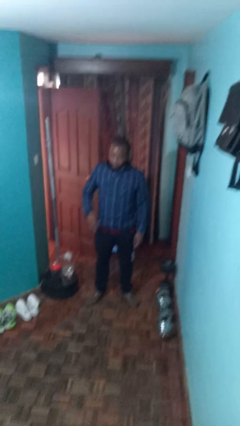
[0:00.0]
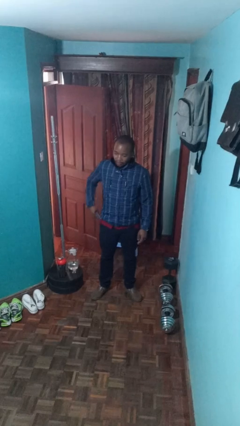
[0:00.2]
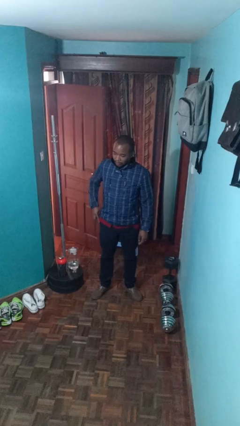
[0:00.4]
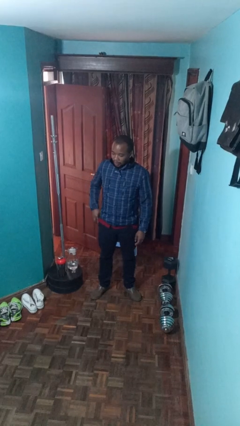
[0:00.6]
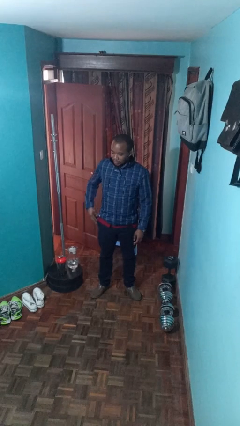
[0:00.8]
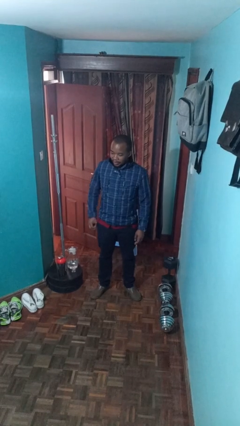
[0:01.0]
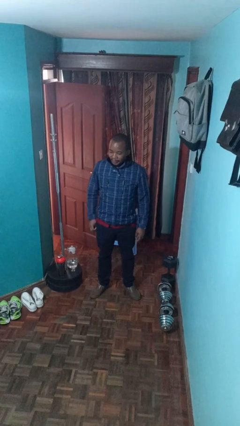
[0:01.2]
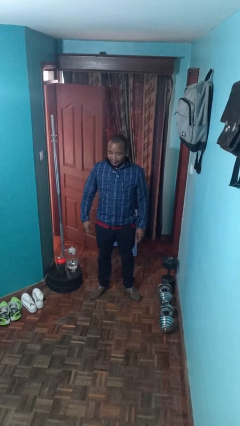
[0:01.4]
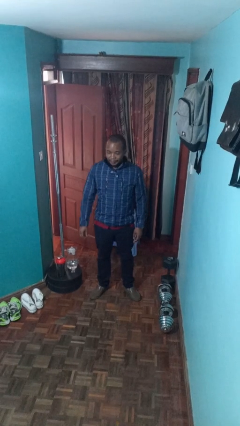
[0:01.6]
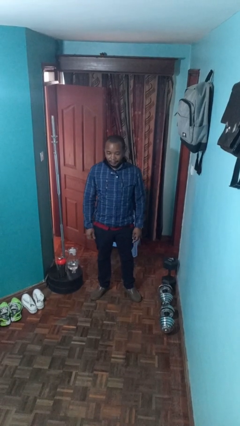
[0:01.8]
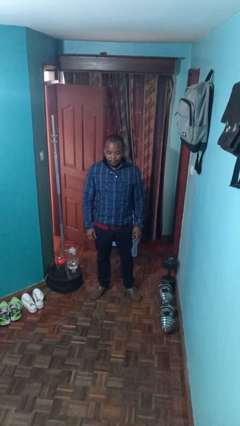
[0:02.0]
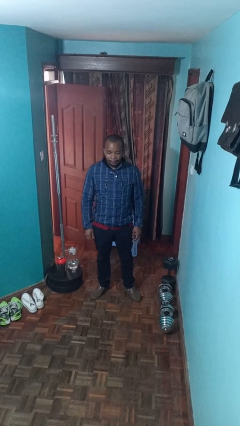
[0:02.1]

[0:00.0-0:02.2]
person puts phone into pocket

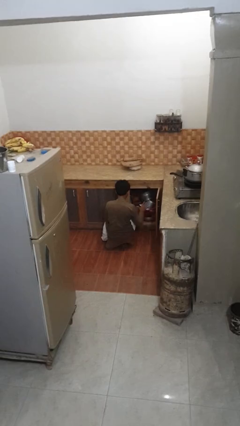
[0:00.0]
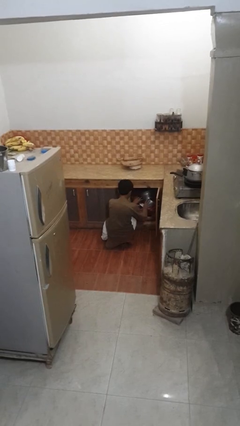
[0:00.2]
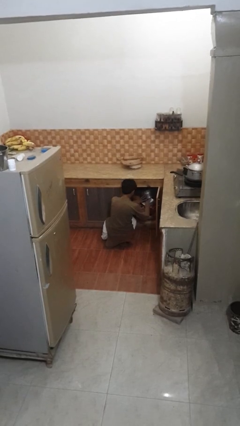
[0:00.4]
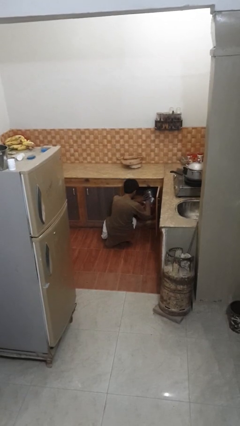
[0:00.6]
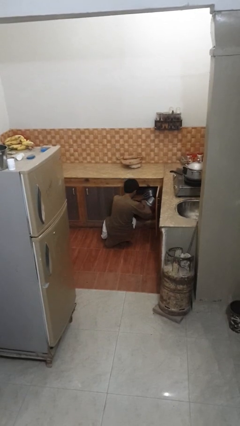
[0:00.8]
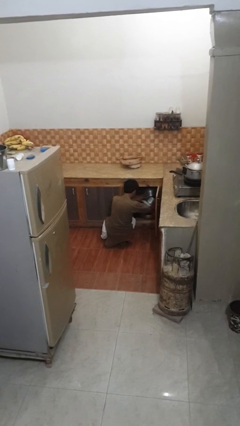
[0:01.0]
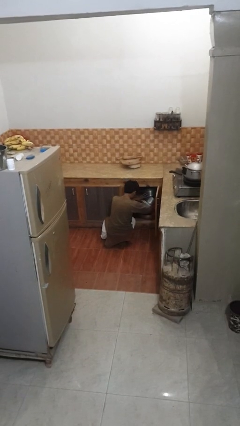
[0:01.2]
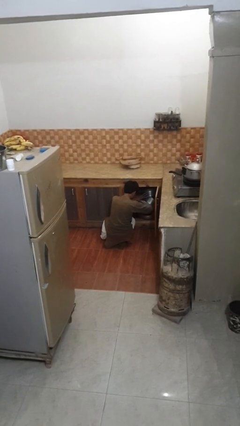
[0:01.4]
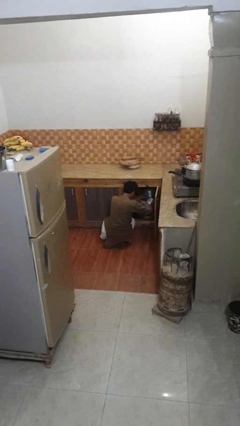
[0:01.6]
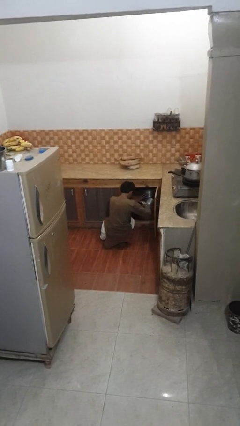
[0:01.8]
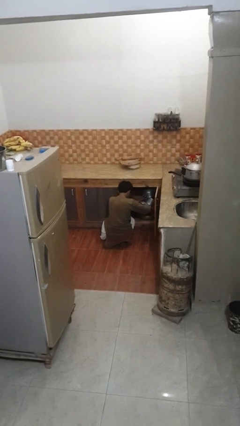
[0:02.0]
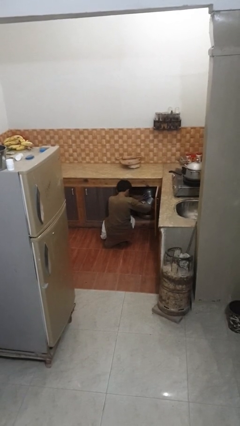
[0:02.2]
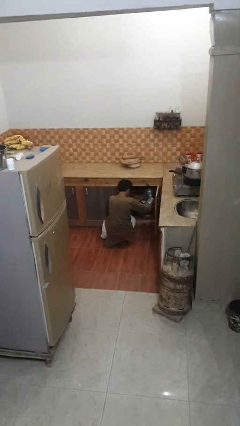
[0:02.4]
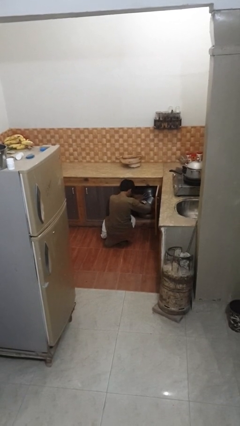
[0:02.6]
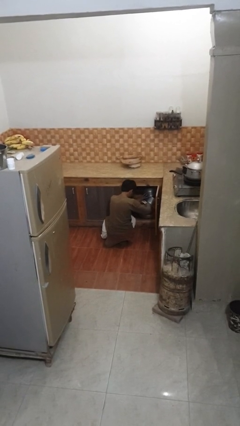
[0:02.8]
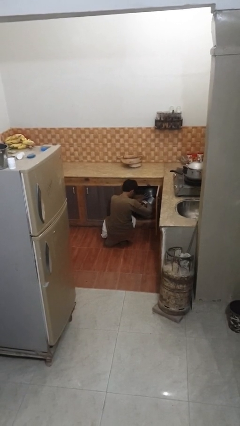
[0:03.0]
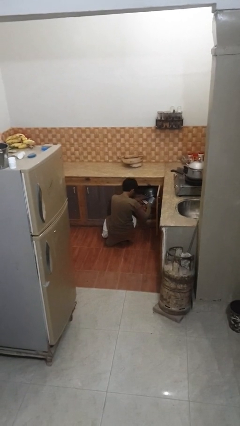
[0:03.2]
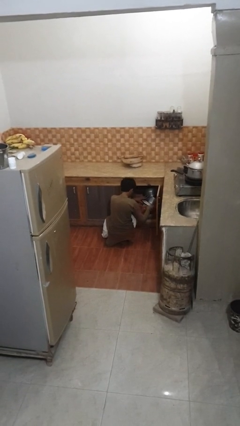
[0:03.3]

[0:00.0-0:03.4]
person searches in kitchen drawer

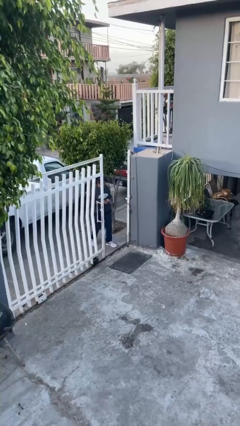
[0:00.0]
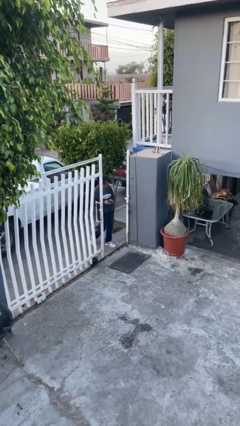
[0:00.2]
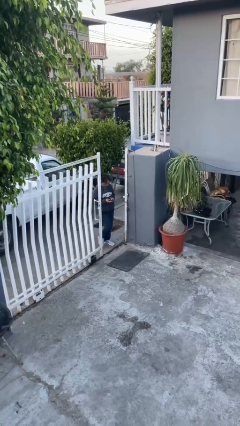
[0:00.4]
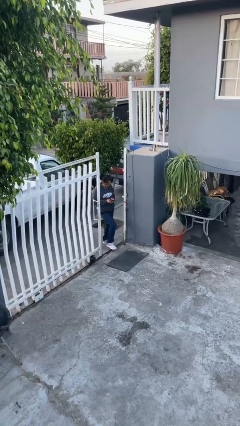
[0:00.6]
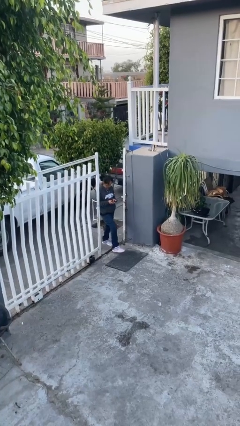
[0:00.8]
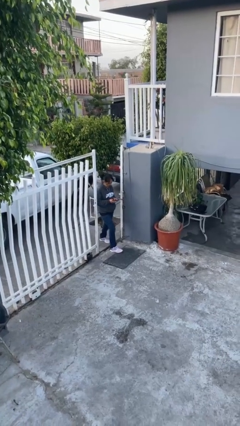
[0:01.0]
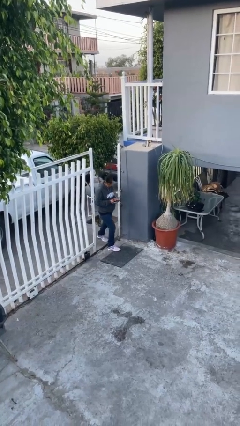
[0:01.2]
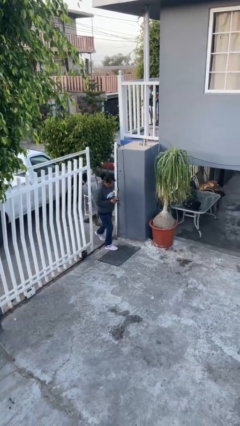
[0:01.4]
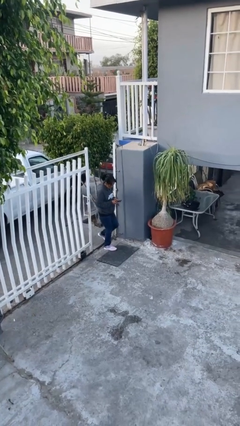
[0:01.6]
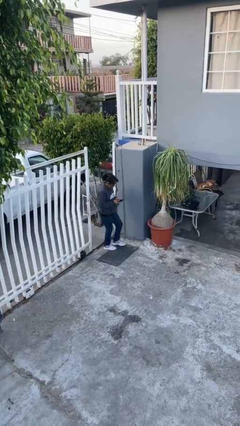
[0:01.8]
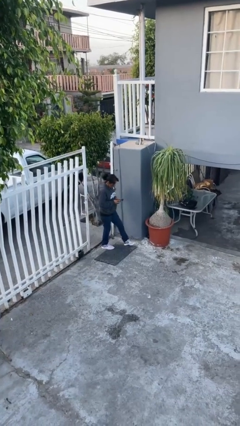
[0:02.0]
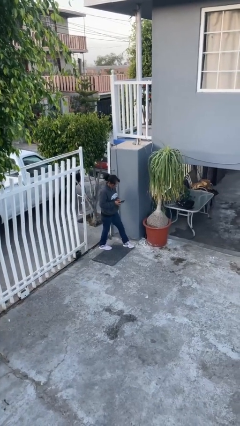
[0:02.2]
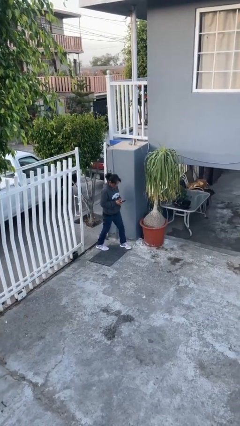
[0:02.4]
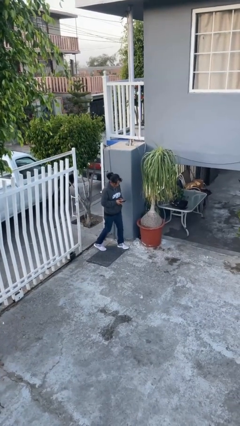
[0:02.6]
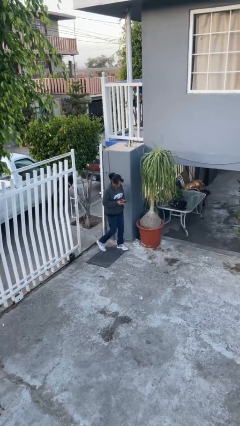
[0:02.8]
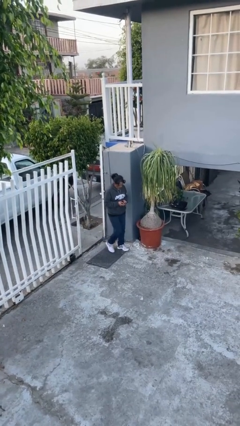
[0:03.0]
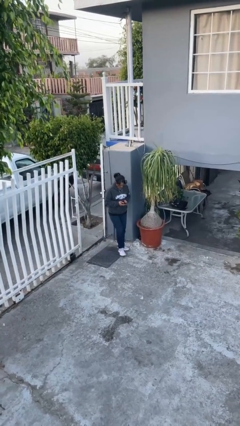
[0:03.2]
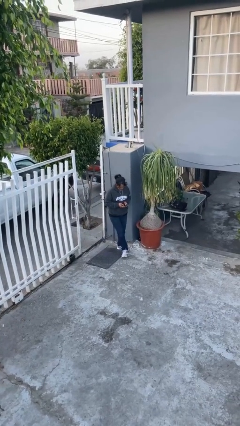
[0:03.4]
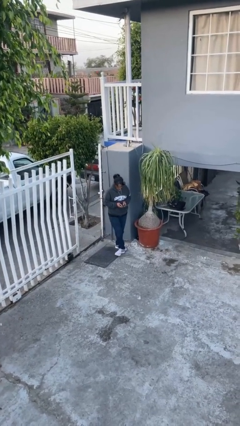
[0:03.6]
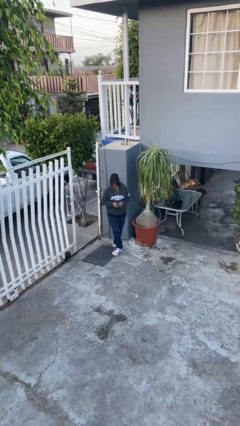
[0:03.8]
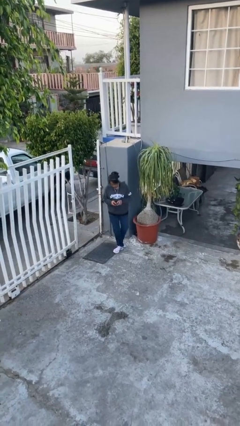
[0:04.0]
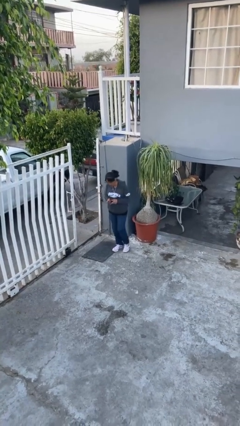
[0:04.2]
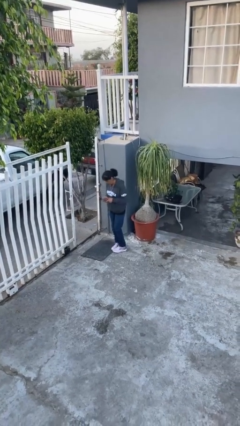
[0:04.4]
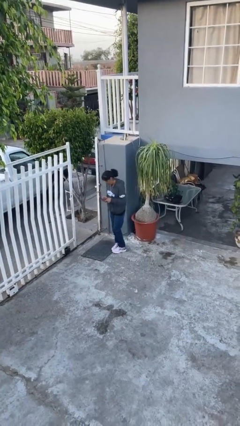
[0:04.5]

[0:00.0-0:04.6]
person enters scene through structure

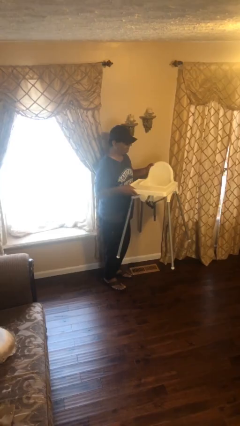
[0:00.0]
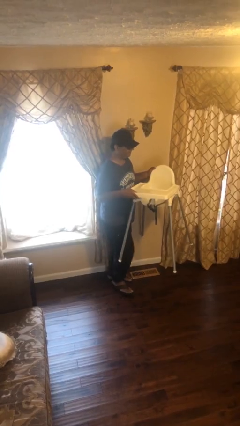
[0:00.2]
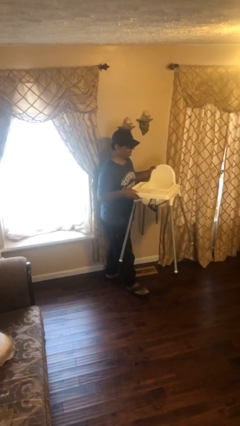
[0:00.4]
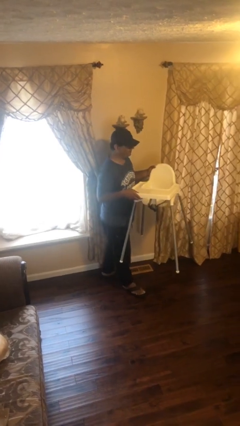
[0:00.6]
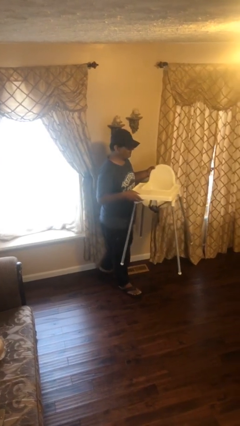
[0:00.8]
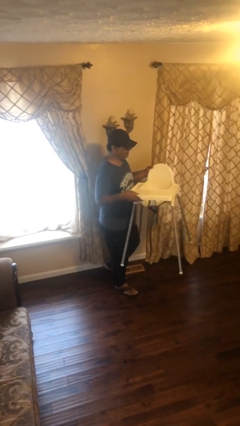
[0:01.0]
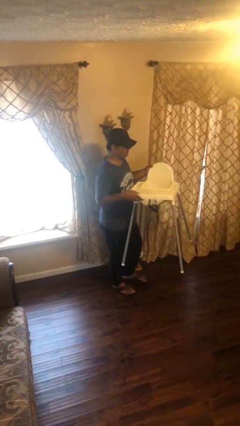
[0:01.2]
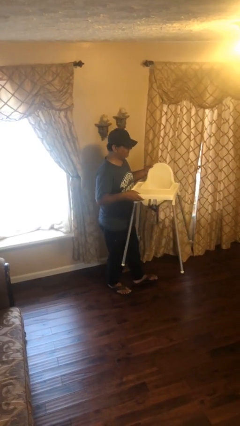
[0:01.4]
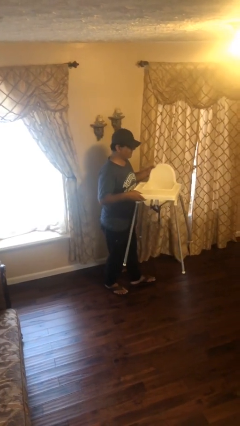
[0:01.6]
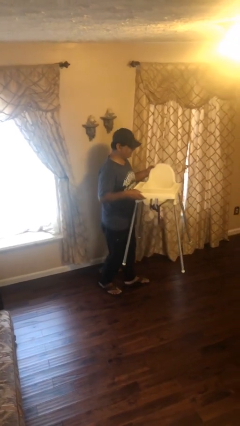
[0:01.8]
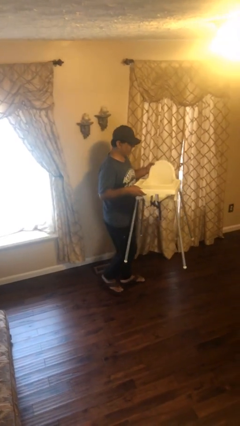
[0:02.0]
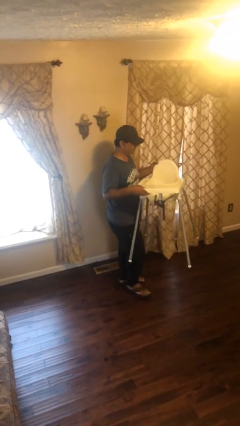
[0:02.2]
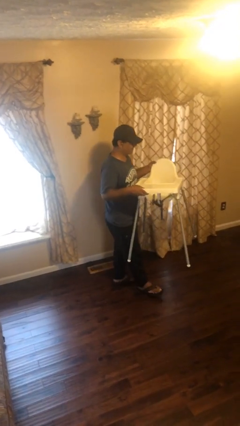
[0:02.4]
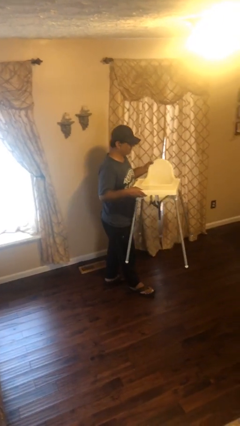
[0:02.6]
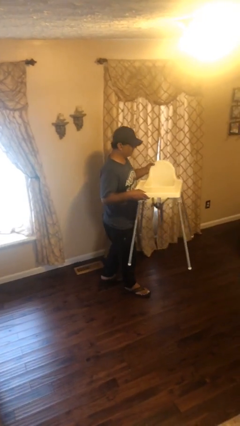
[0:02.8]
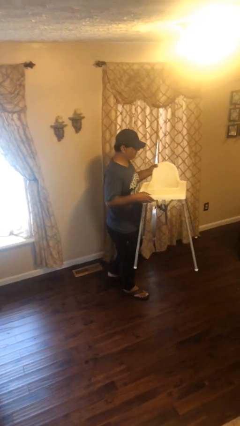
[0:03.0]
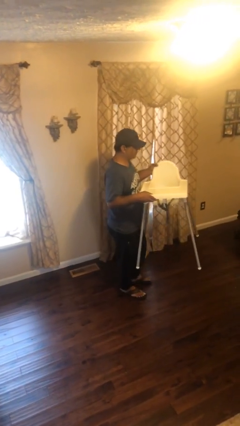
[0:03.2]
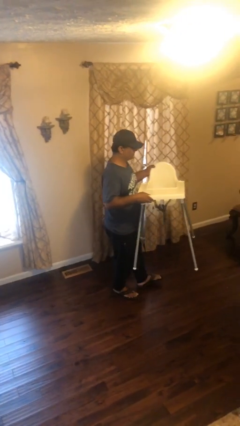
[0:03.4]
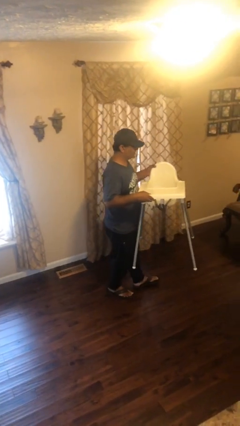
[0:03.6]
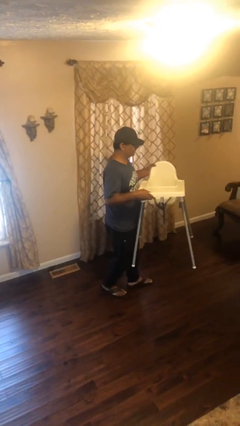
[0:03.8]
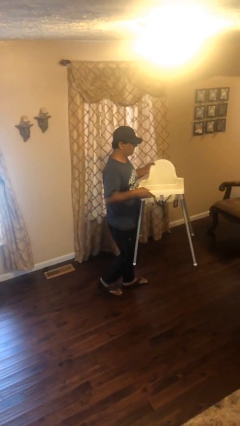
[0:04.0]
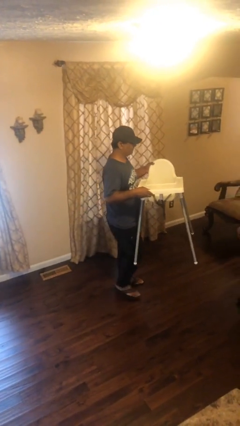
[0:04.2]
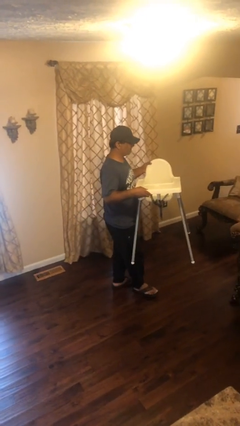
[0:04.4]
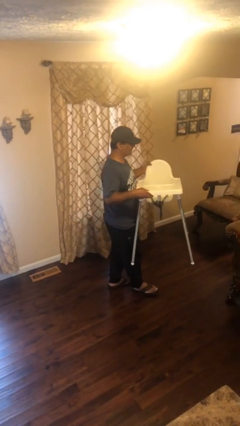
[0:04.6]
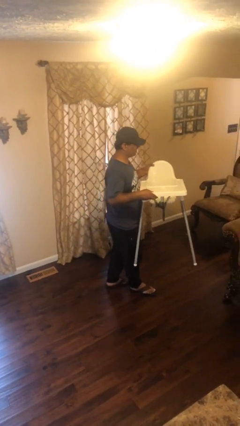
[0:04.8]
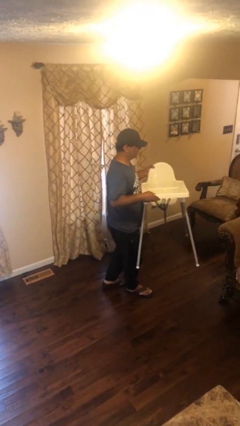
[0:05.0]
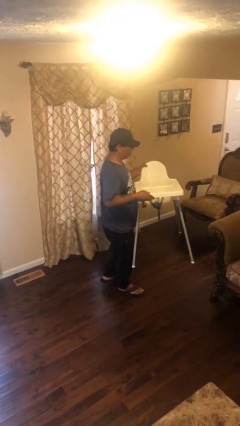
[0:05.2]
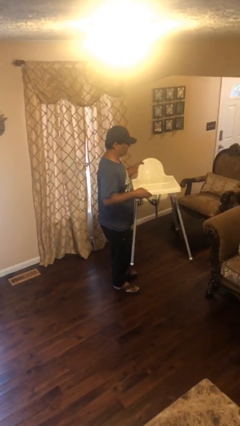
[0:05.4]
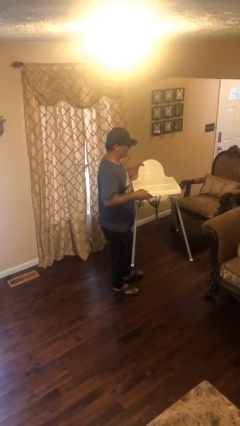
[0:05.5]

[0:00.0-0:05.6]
person carries heavy object

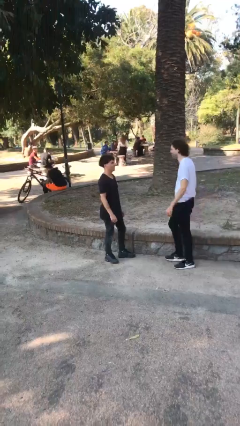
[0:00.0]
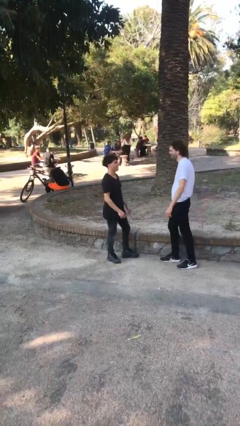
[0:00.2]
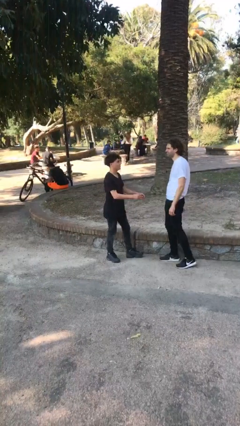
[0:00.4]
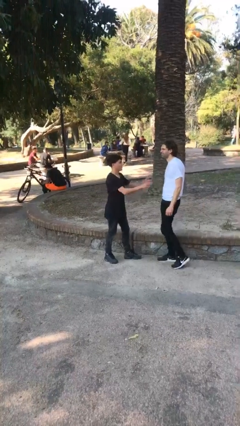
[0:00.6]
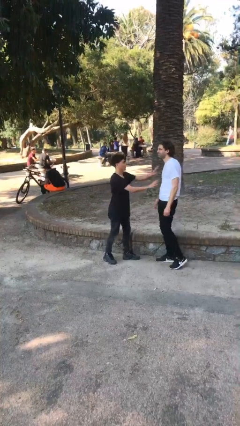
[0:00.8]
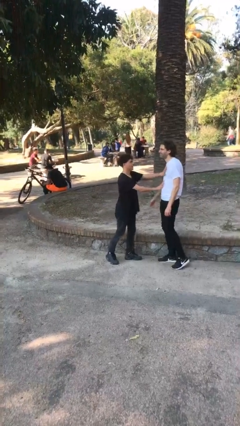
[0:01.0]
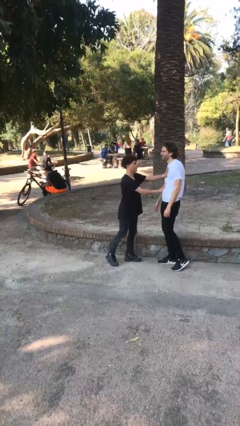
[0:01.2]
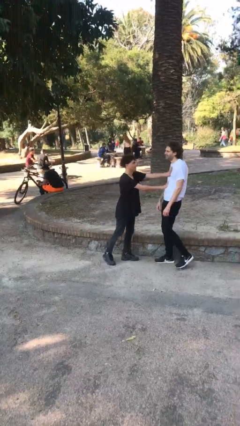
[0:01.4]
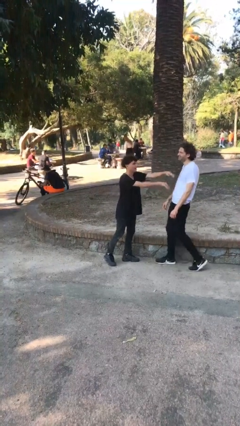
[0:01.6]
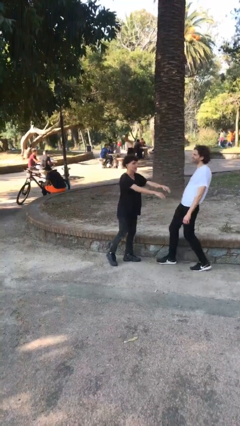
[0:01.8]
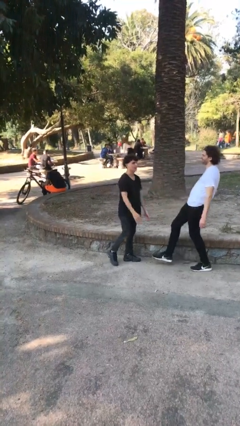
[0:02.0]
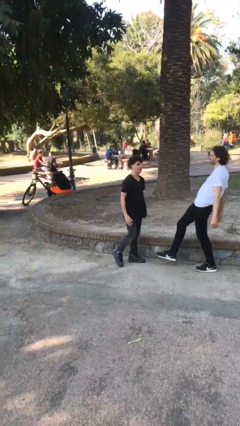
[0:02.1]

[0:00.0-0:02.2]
person shoves person
